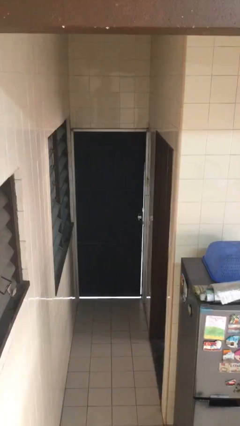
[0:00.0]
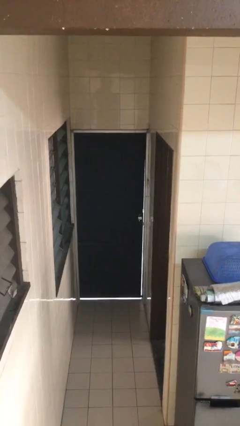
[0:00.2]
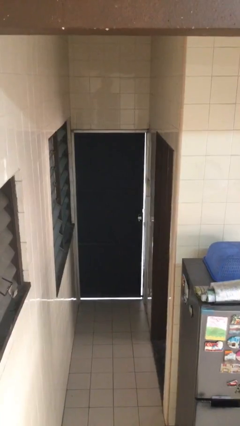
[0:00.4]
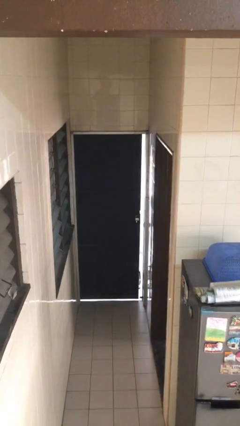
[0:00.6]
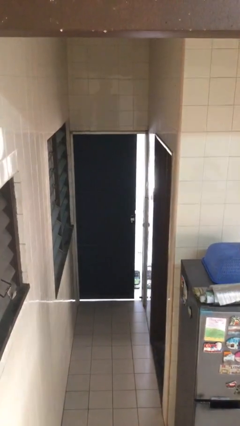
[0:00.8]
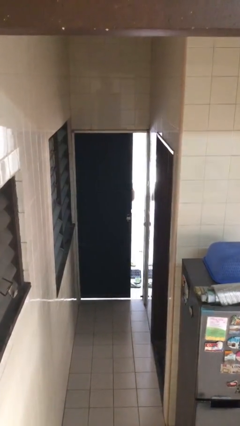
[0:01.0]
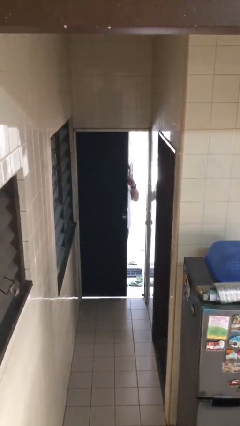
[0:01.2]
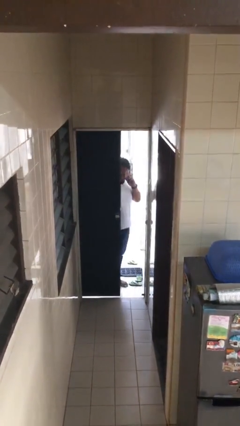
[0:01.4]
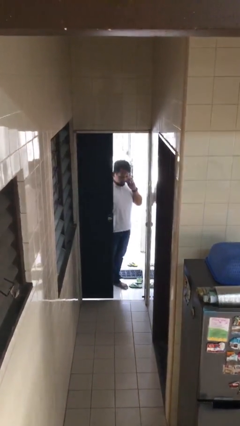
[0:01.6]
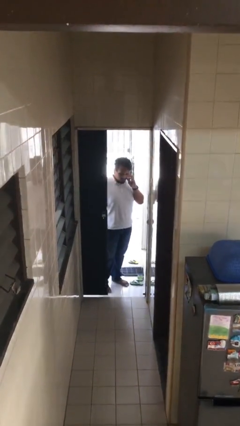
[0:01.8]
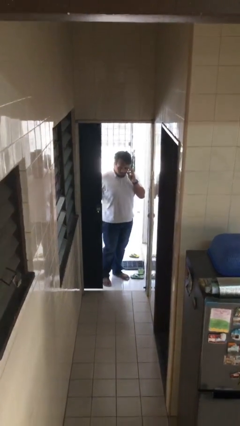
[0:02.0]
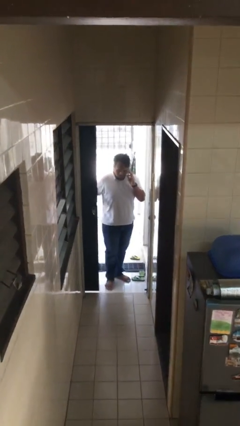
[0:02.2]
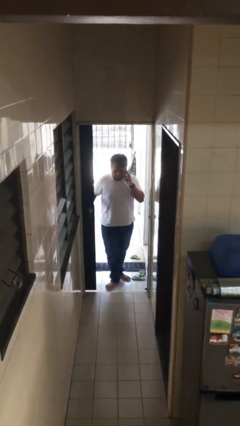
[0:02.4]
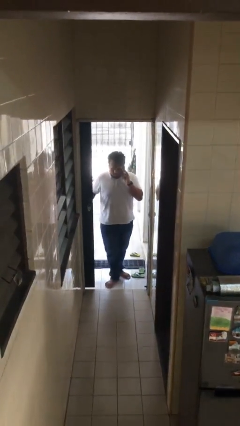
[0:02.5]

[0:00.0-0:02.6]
person opens facility door

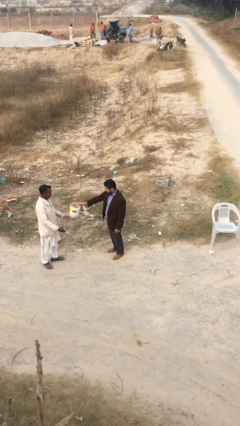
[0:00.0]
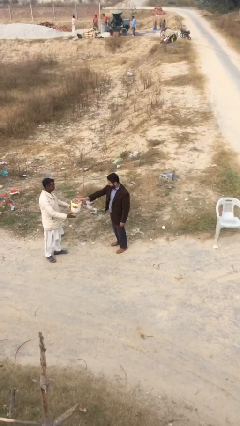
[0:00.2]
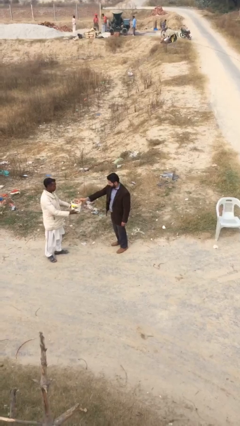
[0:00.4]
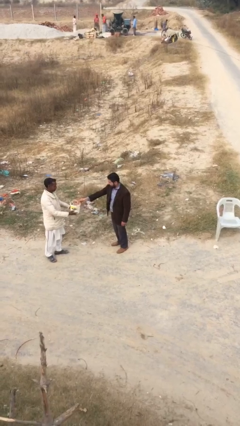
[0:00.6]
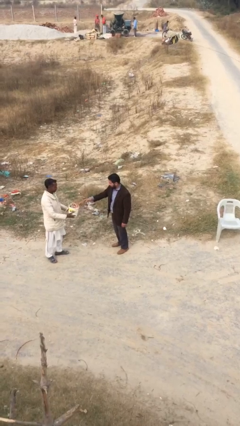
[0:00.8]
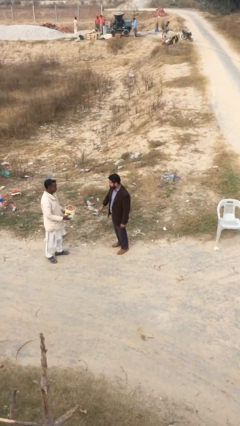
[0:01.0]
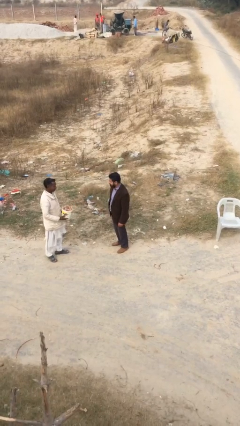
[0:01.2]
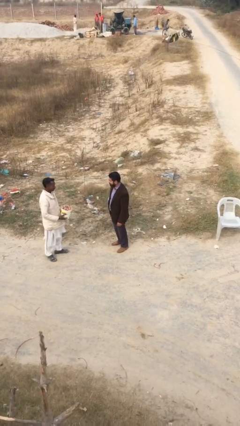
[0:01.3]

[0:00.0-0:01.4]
person transfers object to person

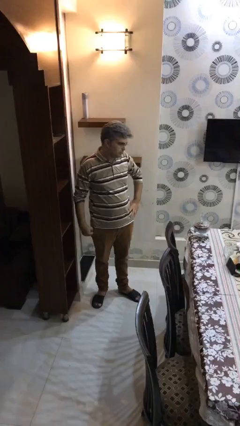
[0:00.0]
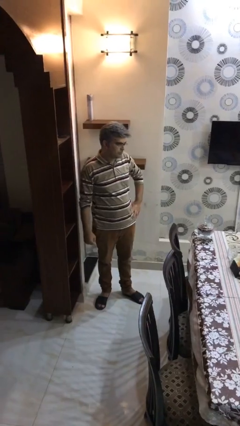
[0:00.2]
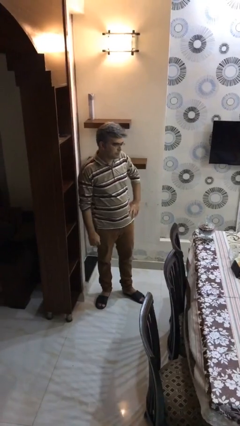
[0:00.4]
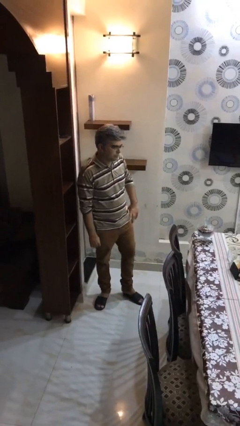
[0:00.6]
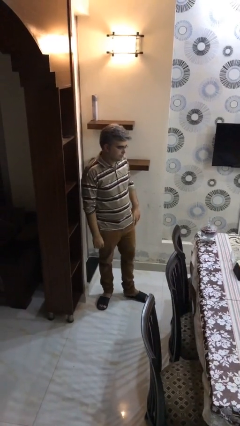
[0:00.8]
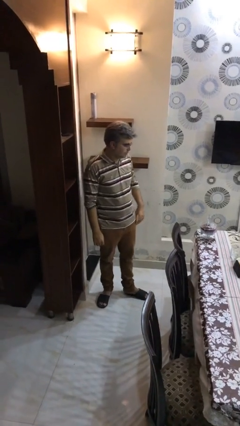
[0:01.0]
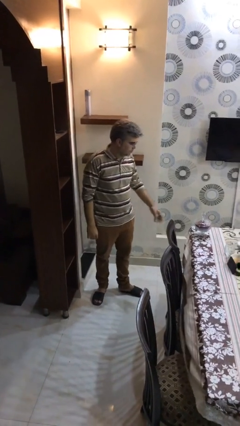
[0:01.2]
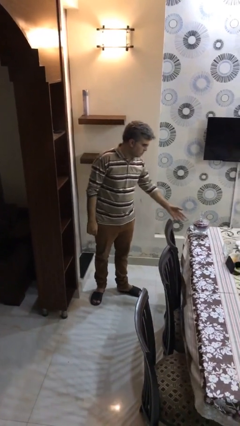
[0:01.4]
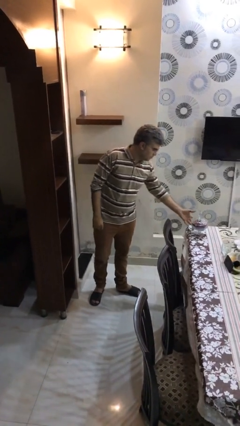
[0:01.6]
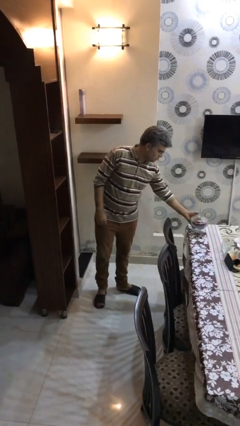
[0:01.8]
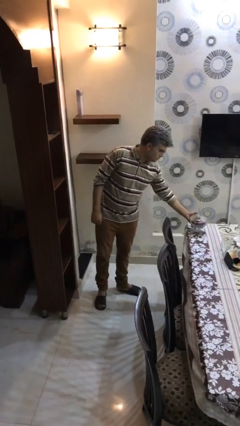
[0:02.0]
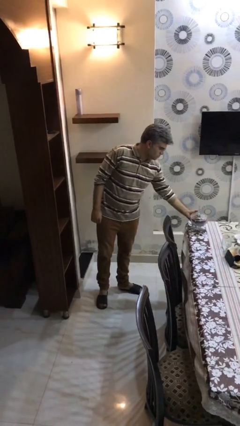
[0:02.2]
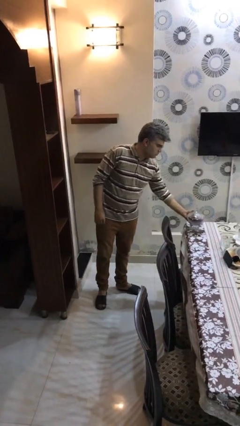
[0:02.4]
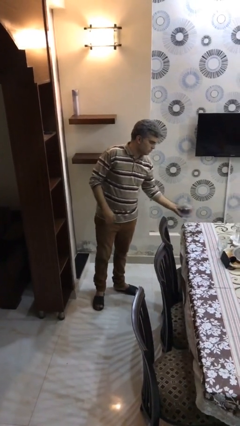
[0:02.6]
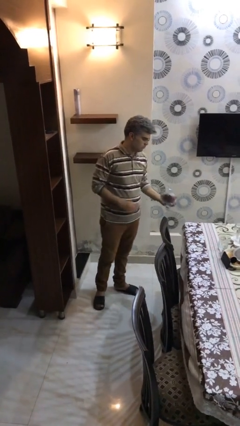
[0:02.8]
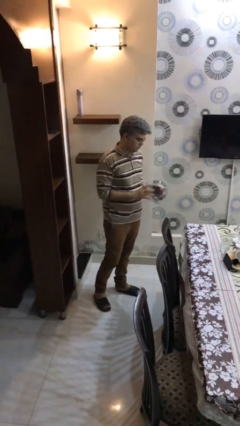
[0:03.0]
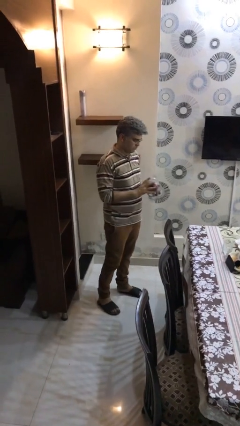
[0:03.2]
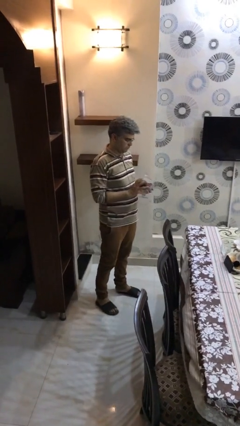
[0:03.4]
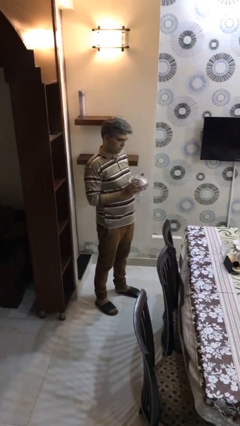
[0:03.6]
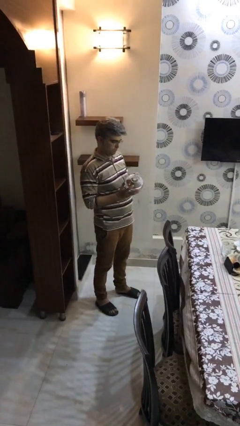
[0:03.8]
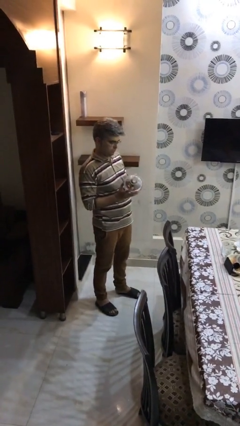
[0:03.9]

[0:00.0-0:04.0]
person picks up object from table

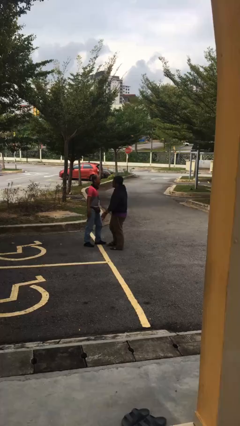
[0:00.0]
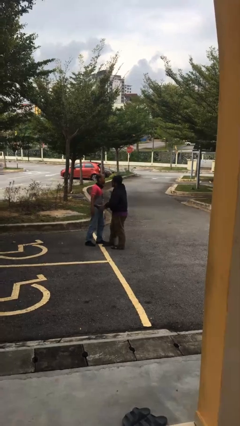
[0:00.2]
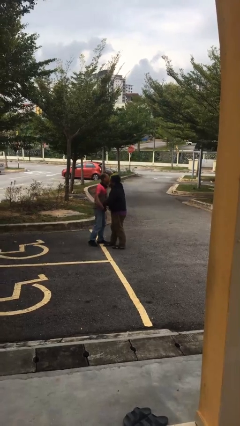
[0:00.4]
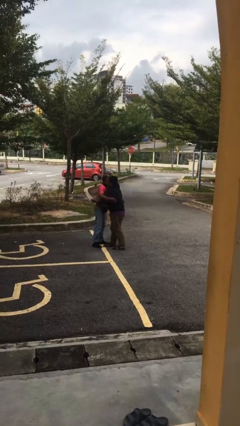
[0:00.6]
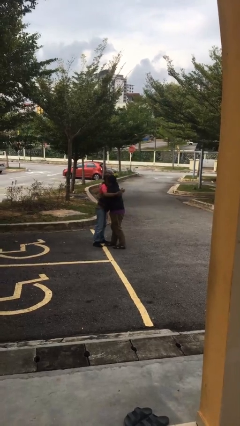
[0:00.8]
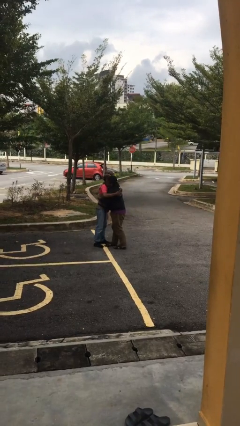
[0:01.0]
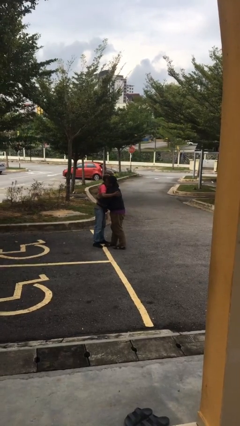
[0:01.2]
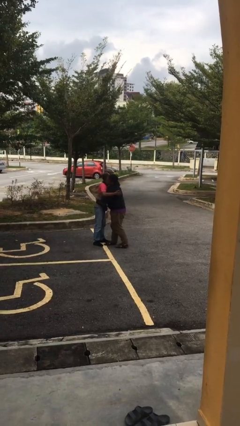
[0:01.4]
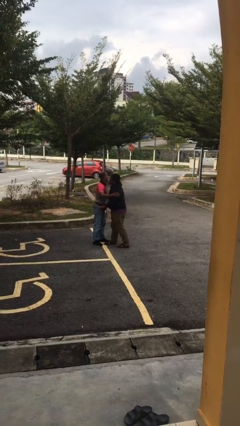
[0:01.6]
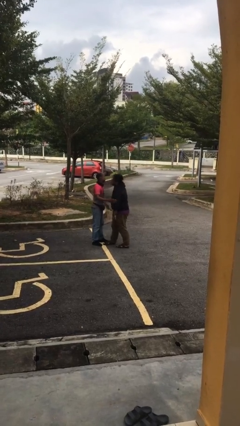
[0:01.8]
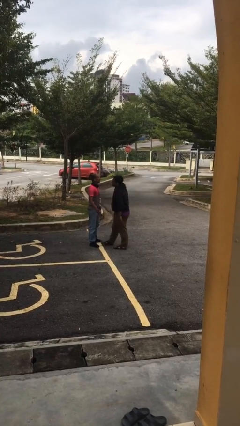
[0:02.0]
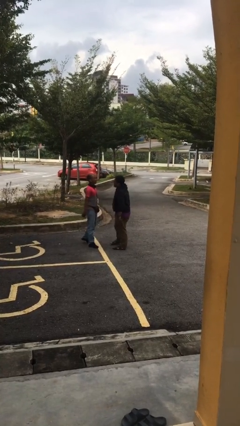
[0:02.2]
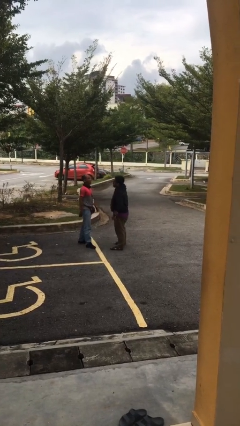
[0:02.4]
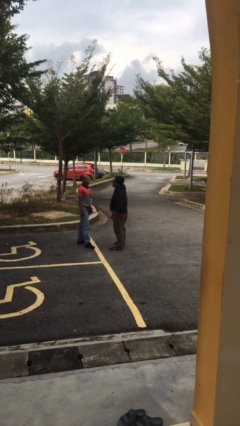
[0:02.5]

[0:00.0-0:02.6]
person embraces person

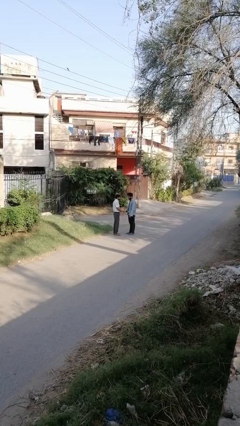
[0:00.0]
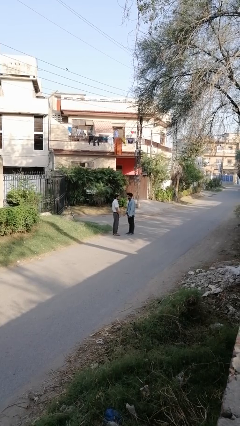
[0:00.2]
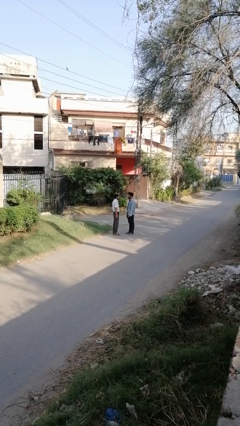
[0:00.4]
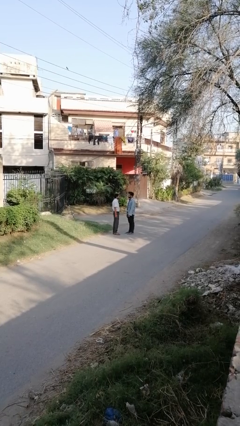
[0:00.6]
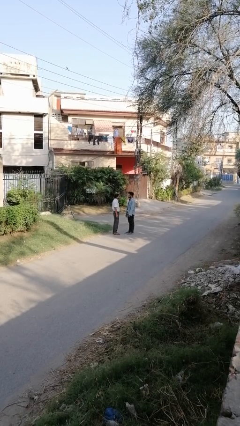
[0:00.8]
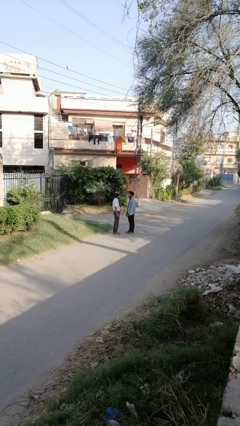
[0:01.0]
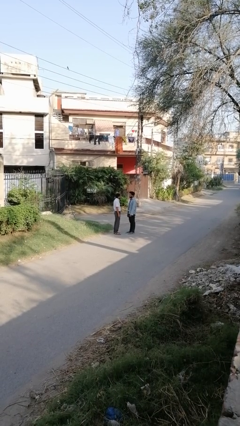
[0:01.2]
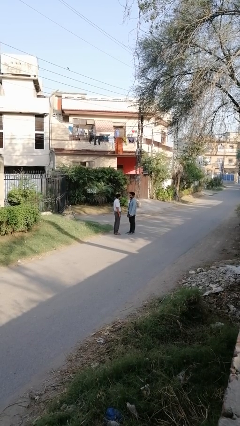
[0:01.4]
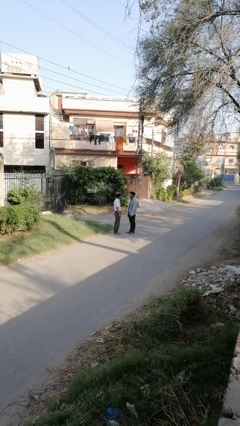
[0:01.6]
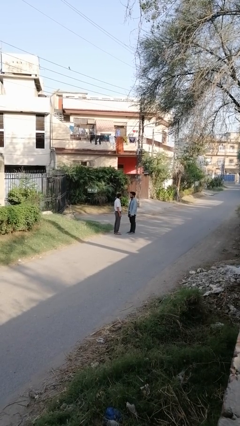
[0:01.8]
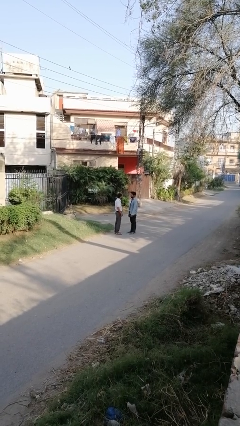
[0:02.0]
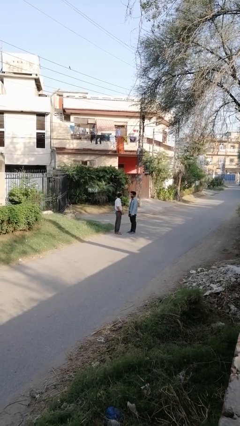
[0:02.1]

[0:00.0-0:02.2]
person highfives hand

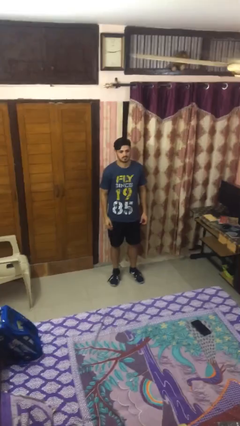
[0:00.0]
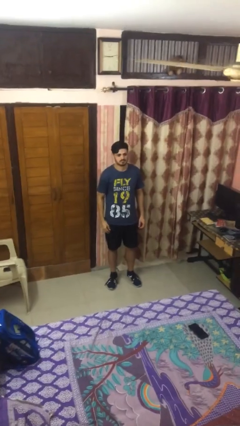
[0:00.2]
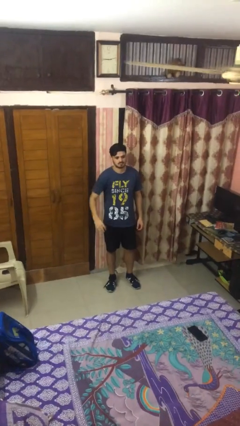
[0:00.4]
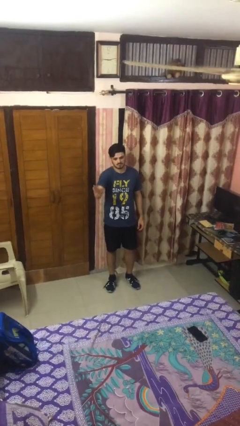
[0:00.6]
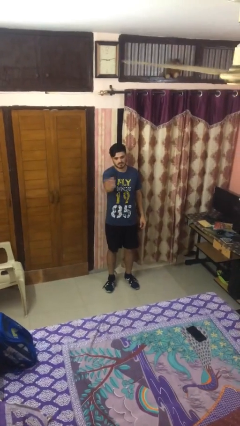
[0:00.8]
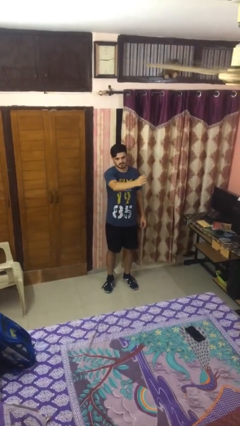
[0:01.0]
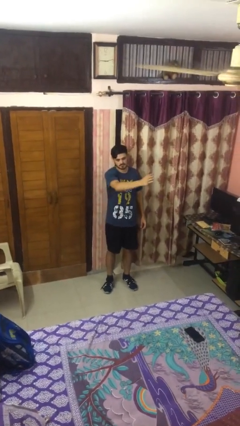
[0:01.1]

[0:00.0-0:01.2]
person gestures swipe left

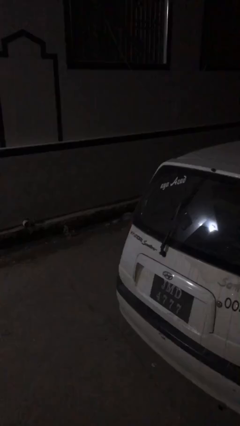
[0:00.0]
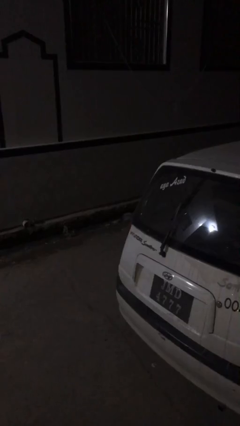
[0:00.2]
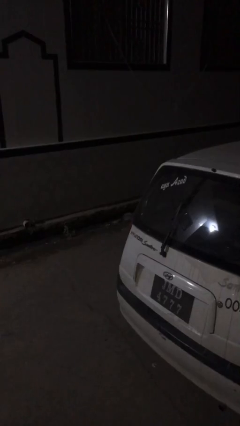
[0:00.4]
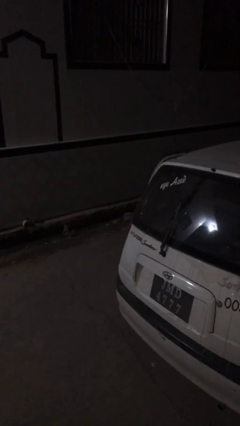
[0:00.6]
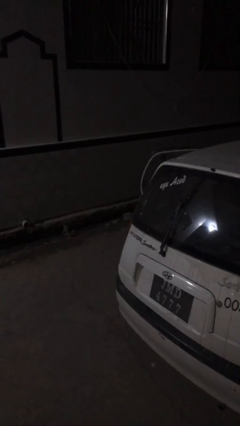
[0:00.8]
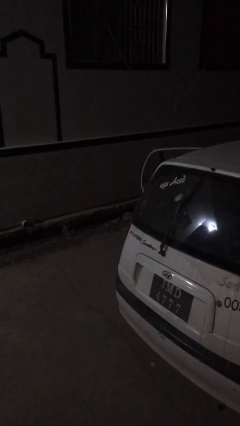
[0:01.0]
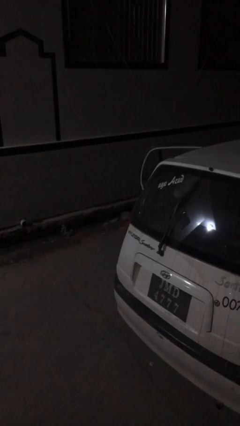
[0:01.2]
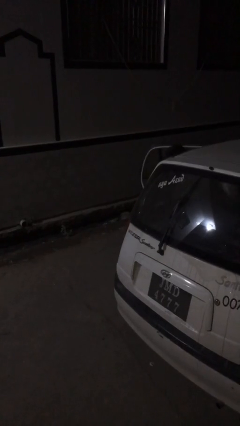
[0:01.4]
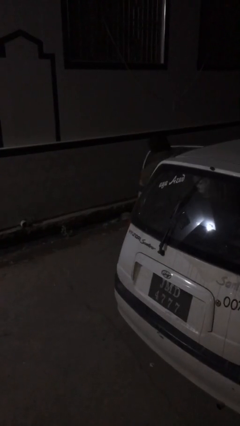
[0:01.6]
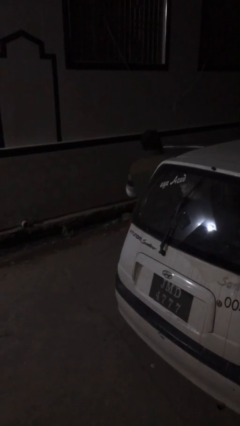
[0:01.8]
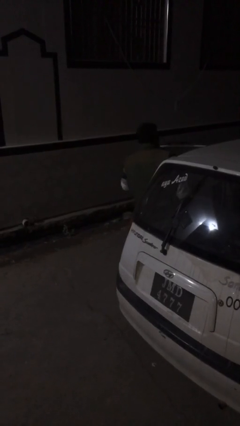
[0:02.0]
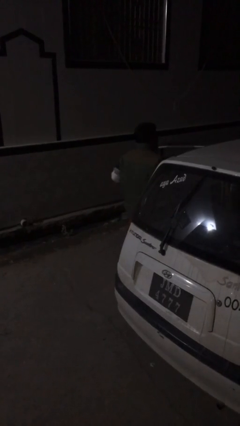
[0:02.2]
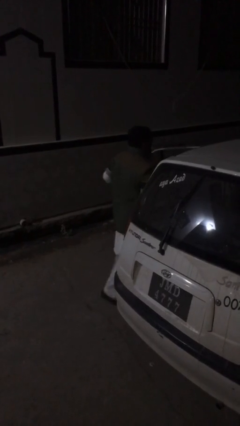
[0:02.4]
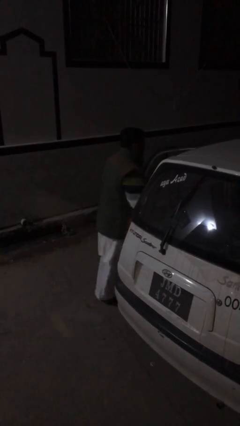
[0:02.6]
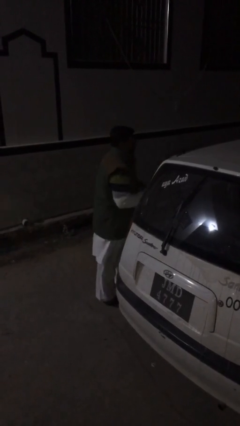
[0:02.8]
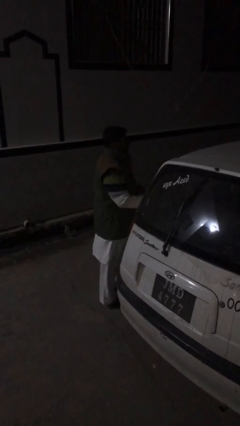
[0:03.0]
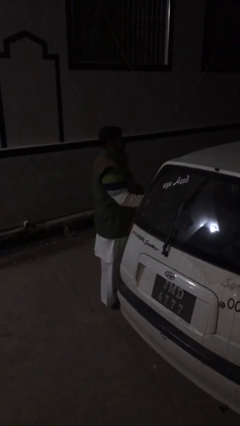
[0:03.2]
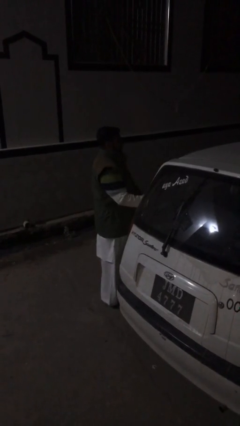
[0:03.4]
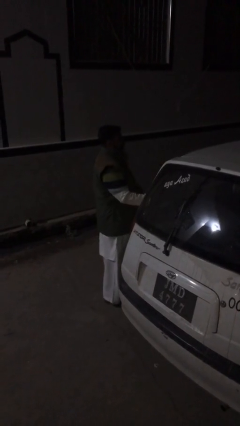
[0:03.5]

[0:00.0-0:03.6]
person exits car
